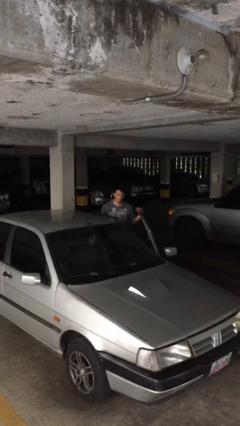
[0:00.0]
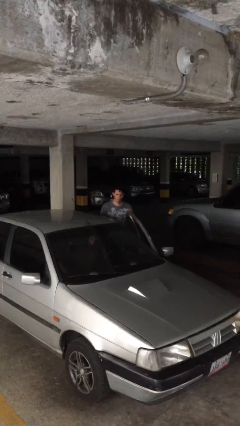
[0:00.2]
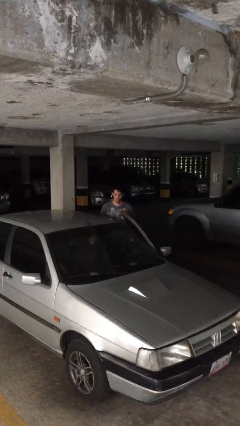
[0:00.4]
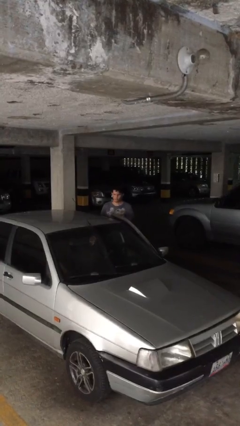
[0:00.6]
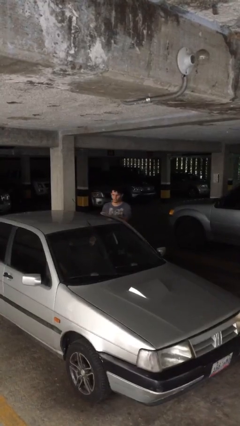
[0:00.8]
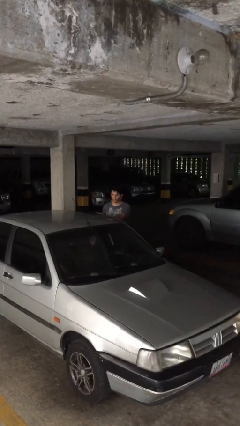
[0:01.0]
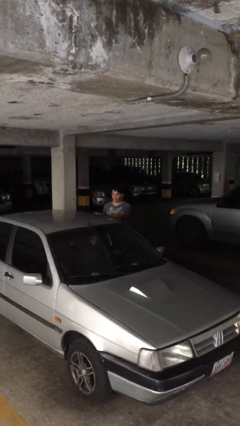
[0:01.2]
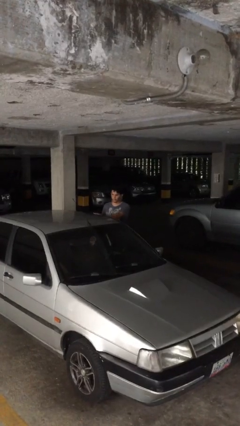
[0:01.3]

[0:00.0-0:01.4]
person closes car door

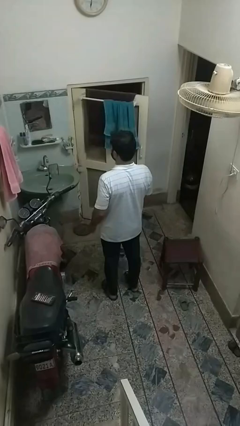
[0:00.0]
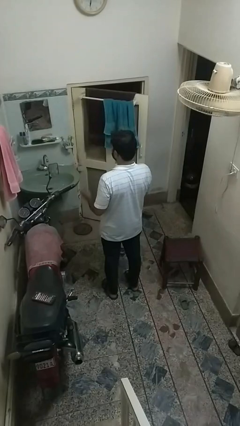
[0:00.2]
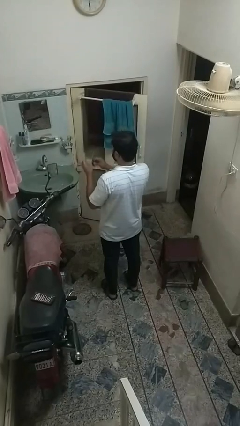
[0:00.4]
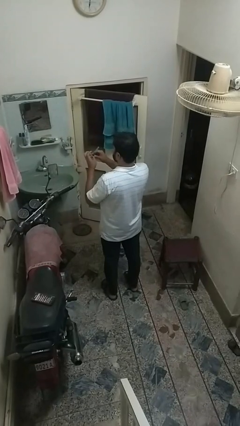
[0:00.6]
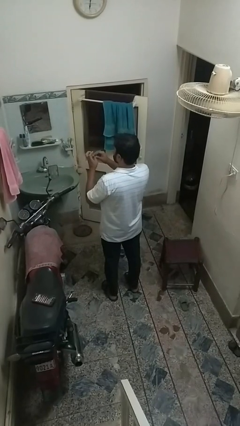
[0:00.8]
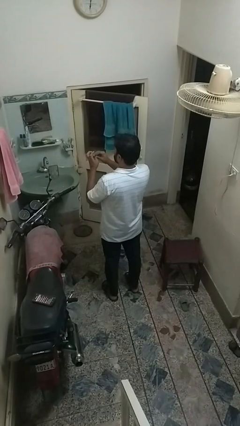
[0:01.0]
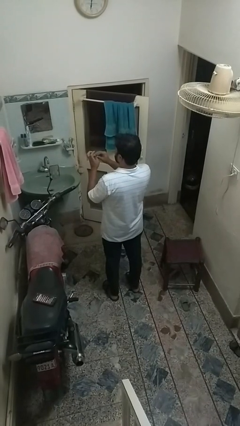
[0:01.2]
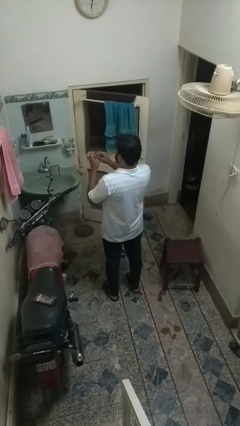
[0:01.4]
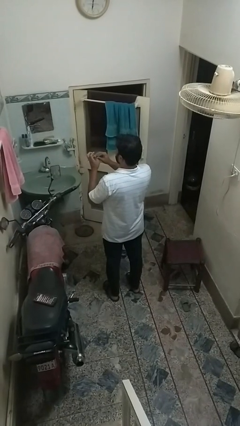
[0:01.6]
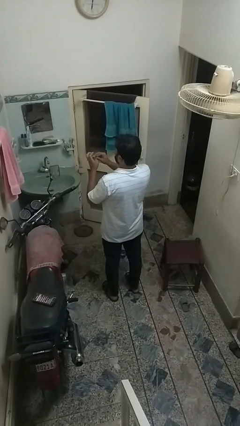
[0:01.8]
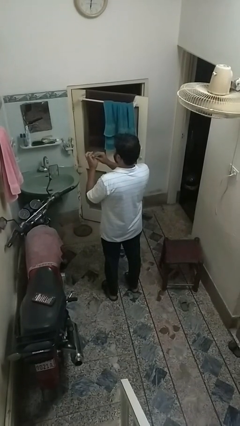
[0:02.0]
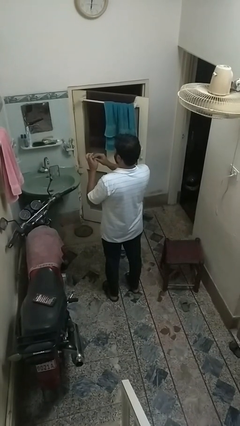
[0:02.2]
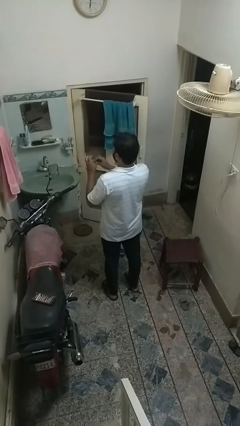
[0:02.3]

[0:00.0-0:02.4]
person files fingernails

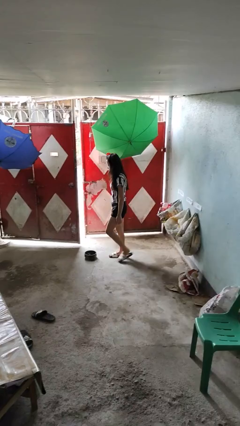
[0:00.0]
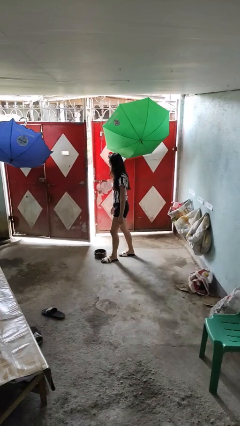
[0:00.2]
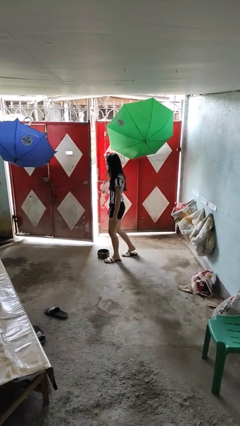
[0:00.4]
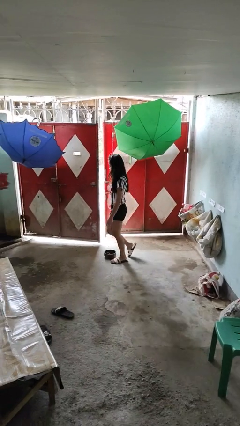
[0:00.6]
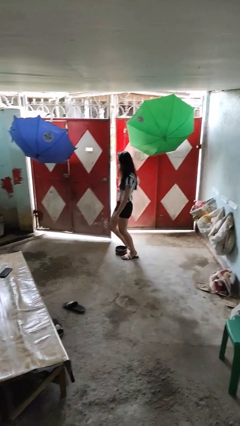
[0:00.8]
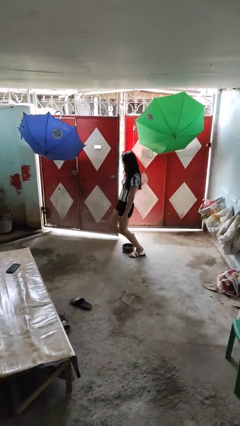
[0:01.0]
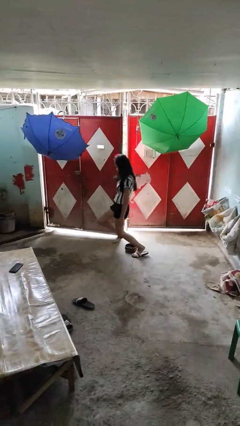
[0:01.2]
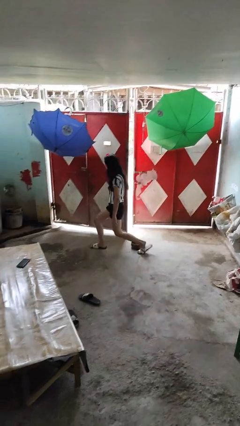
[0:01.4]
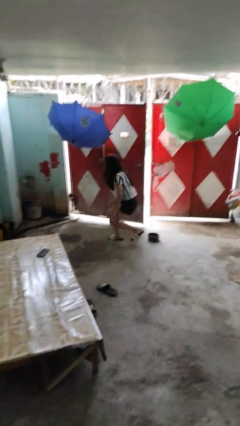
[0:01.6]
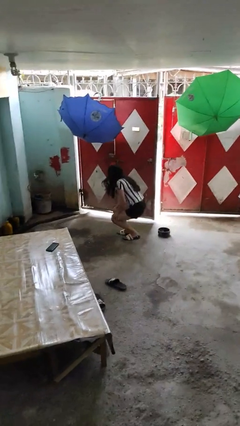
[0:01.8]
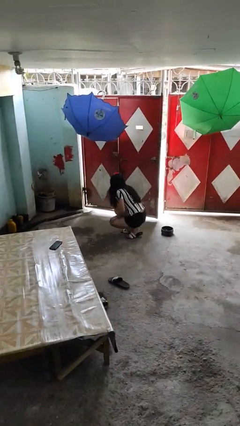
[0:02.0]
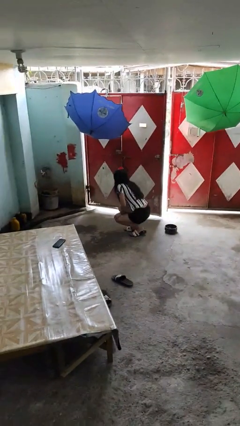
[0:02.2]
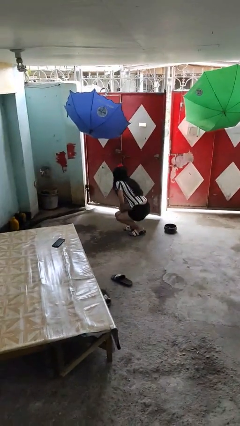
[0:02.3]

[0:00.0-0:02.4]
person trips on object on floor

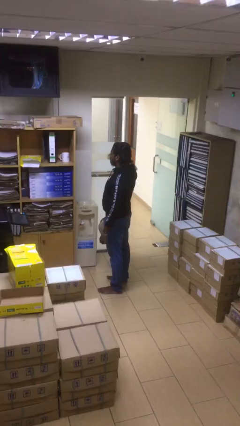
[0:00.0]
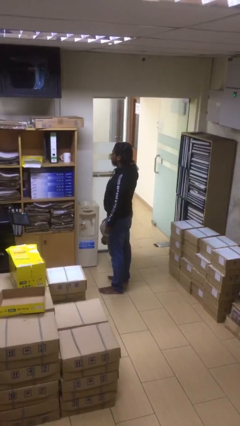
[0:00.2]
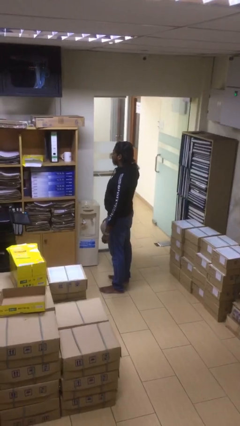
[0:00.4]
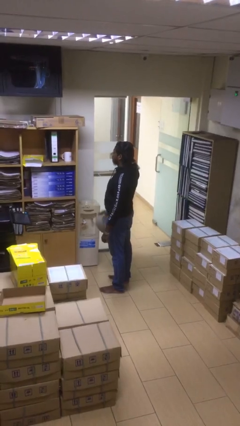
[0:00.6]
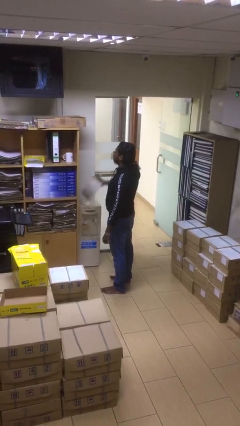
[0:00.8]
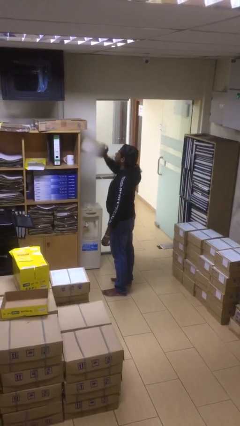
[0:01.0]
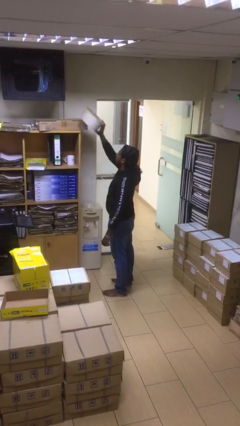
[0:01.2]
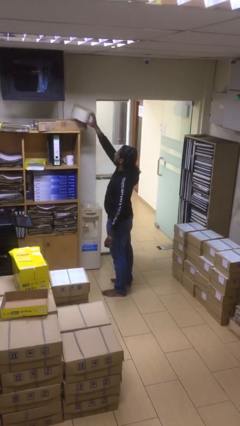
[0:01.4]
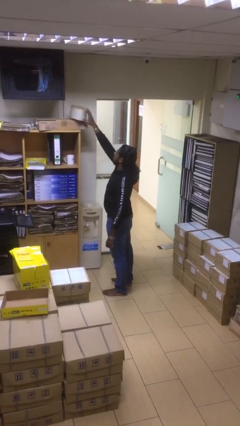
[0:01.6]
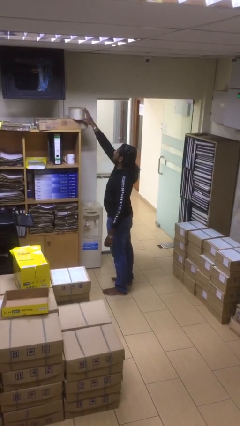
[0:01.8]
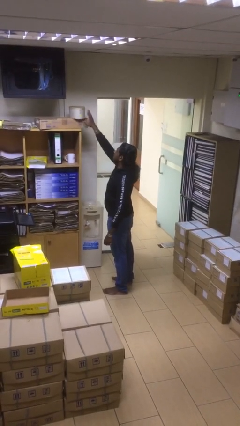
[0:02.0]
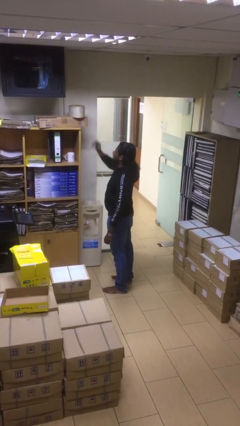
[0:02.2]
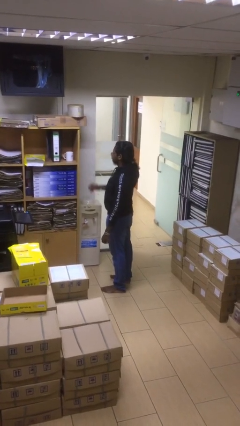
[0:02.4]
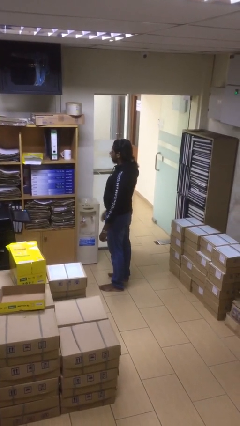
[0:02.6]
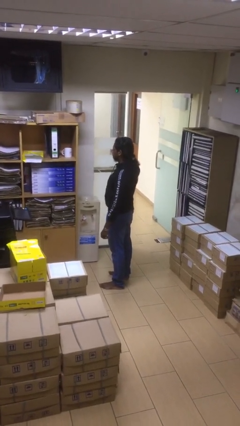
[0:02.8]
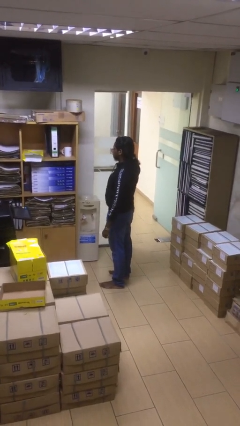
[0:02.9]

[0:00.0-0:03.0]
person puts down object on shelf

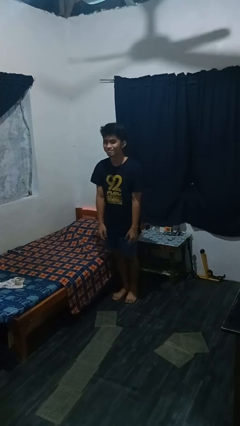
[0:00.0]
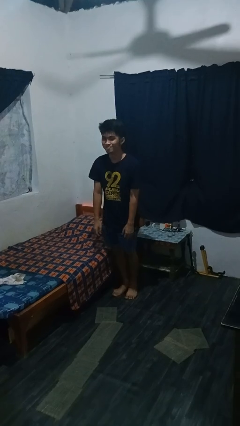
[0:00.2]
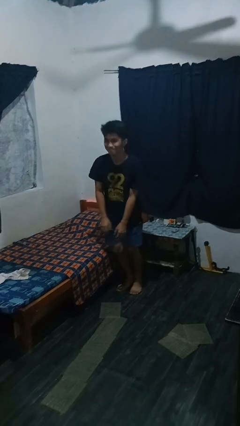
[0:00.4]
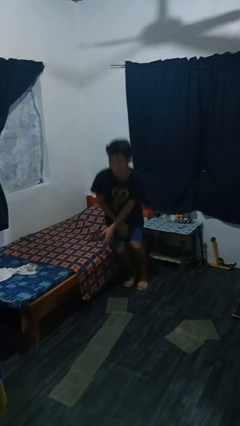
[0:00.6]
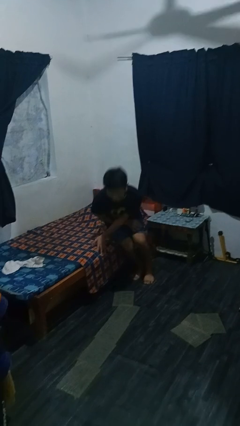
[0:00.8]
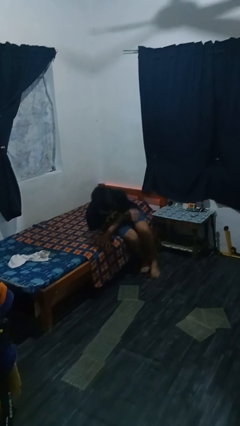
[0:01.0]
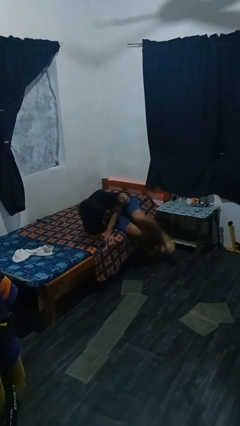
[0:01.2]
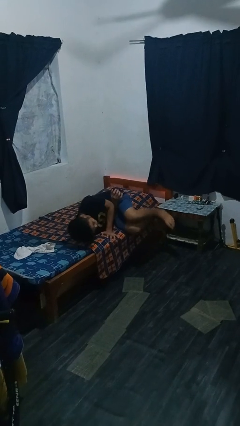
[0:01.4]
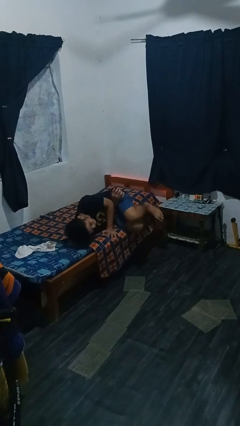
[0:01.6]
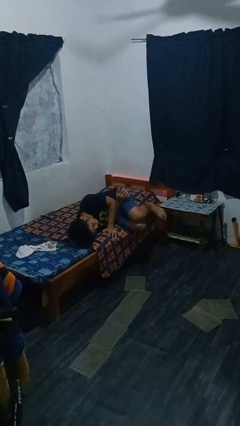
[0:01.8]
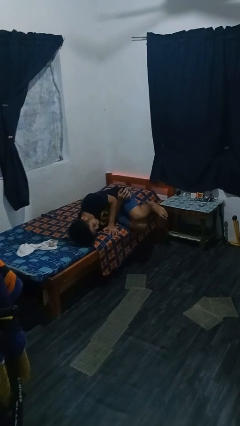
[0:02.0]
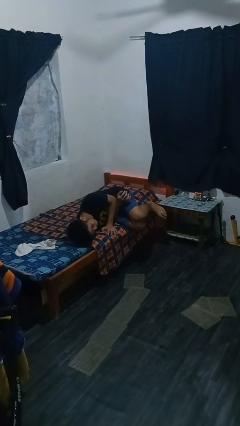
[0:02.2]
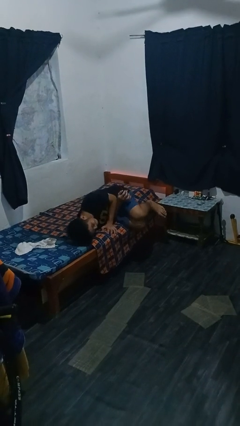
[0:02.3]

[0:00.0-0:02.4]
person lies down on bed

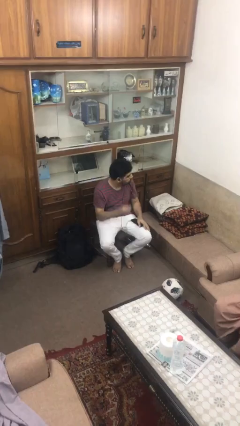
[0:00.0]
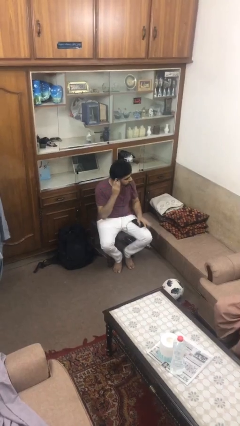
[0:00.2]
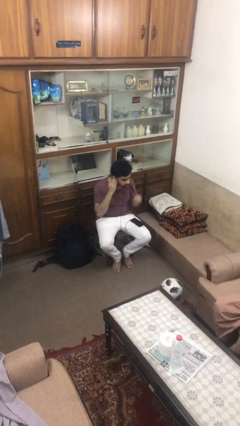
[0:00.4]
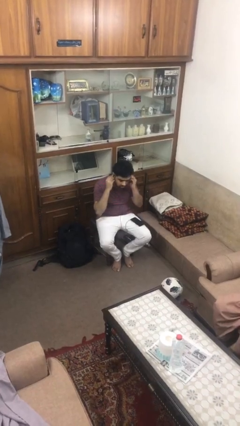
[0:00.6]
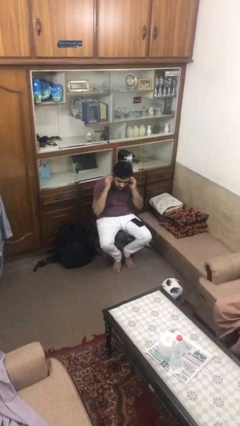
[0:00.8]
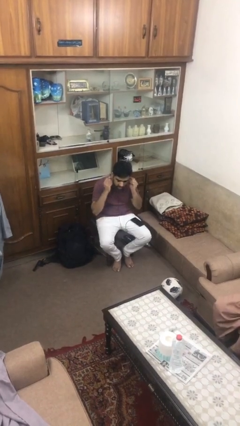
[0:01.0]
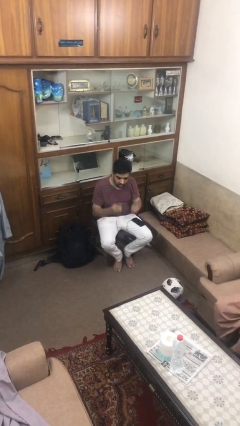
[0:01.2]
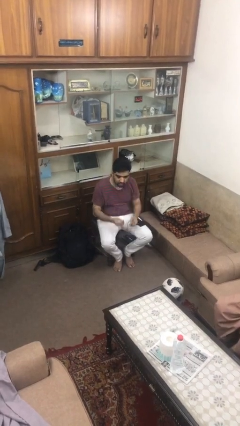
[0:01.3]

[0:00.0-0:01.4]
person takes off headphones

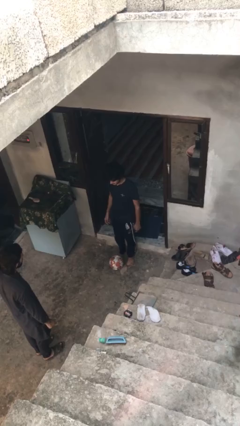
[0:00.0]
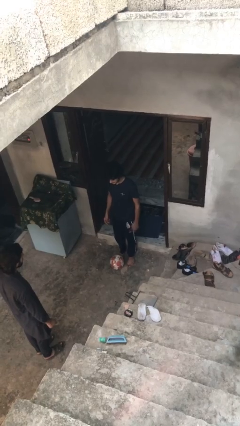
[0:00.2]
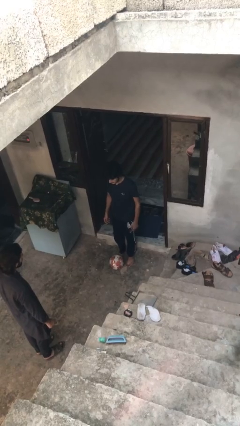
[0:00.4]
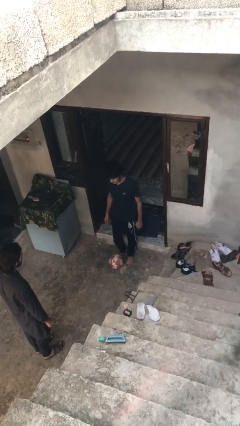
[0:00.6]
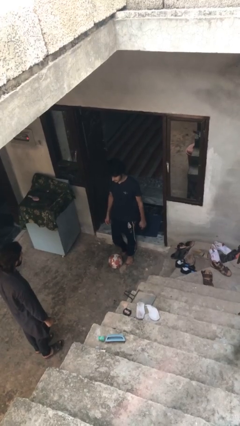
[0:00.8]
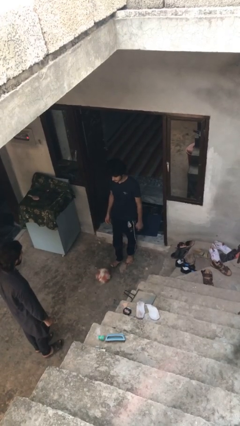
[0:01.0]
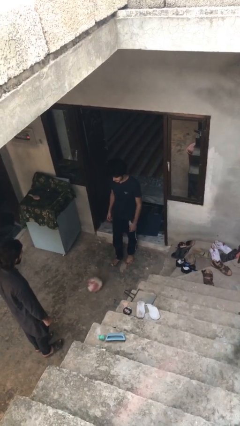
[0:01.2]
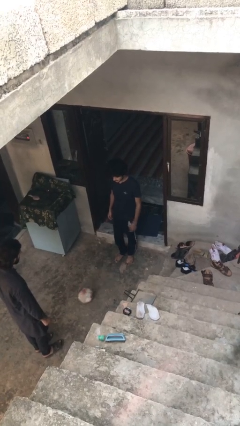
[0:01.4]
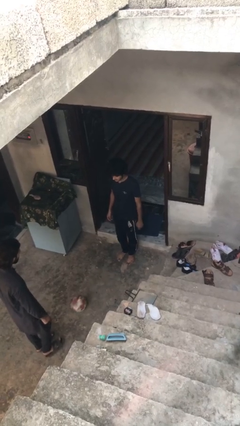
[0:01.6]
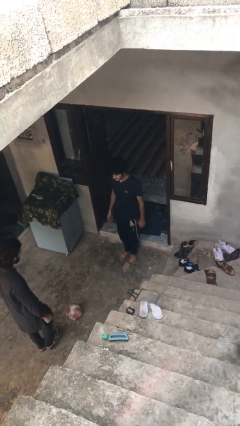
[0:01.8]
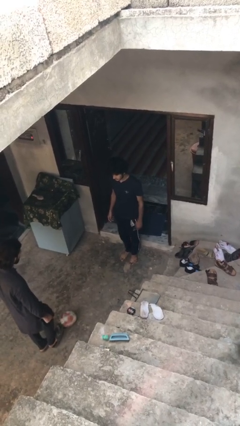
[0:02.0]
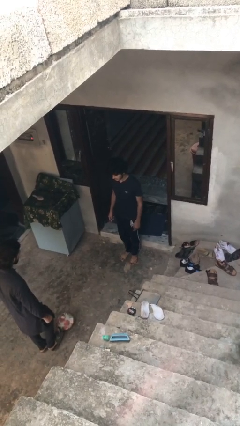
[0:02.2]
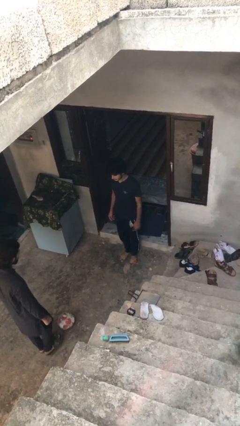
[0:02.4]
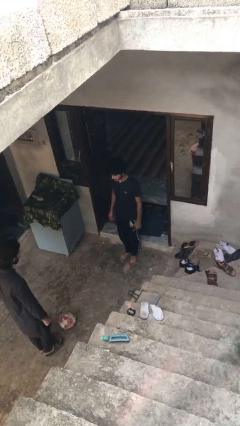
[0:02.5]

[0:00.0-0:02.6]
person kicks object to person

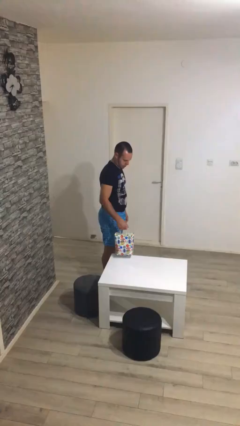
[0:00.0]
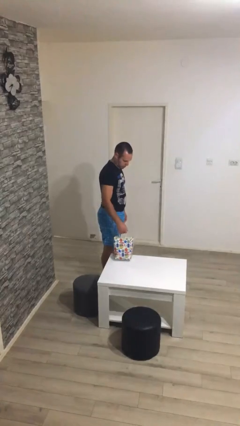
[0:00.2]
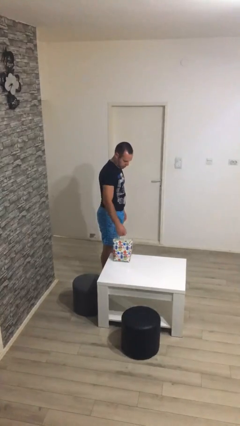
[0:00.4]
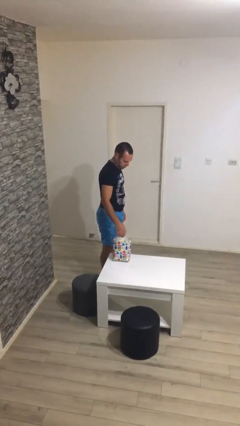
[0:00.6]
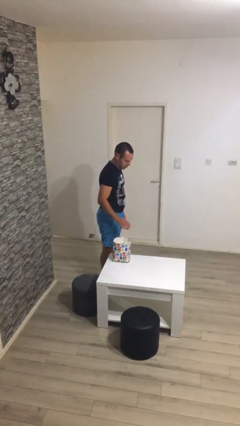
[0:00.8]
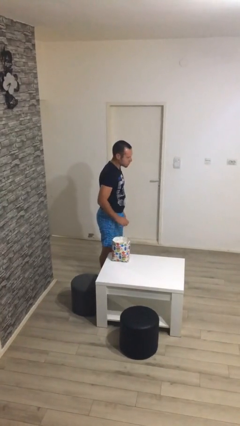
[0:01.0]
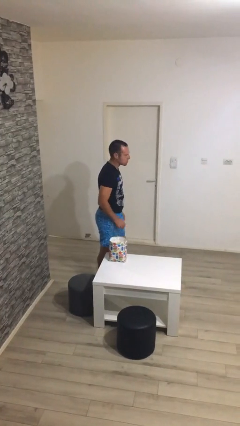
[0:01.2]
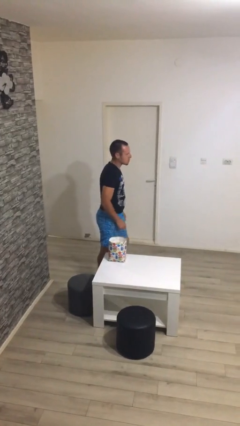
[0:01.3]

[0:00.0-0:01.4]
person puts down object on table
